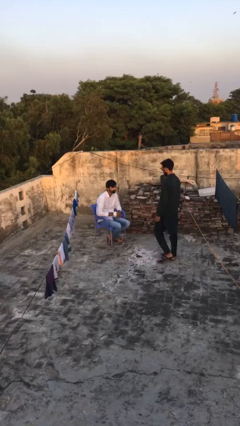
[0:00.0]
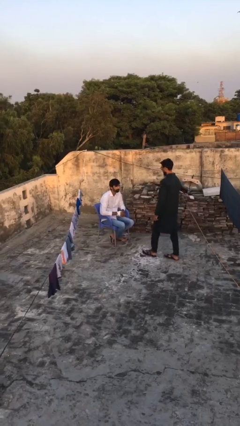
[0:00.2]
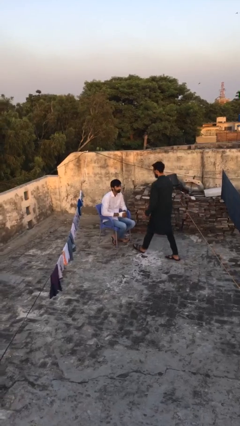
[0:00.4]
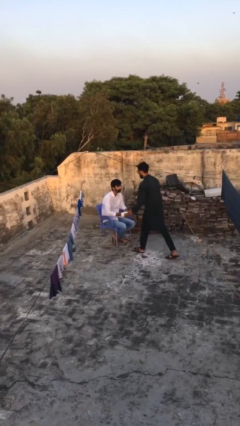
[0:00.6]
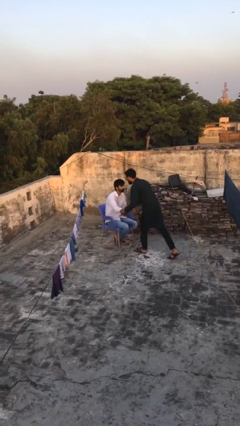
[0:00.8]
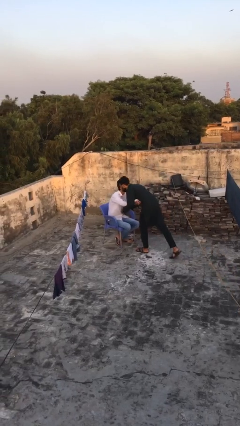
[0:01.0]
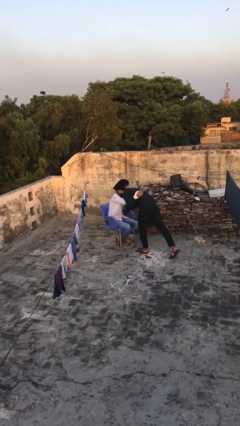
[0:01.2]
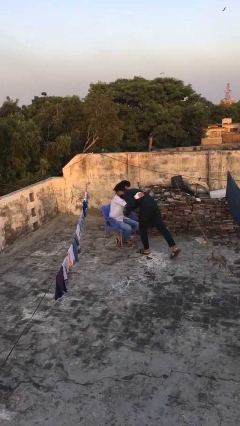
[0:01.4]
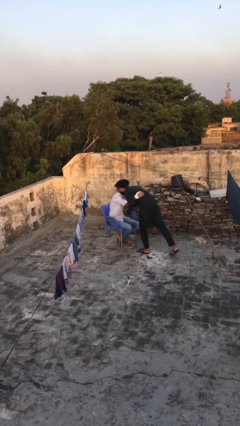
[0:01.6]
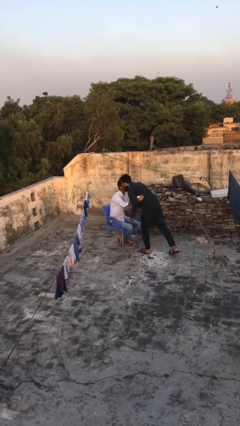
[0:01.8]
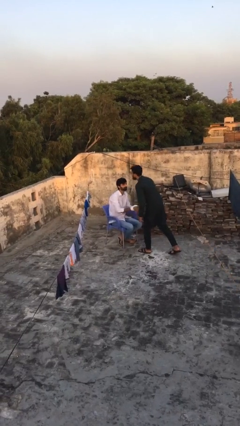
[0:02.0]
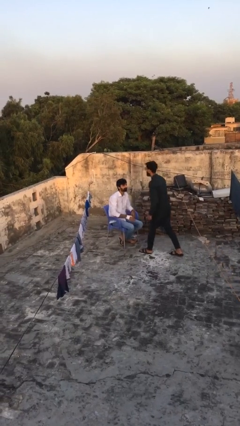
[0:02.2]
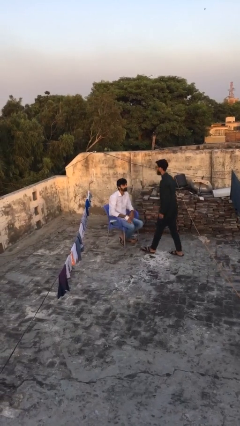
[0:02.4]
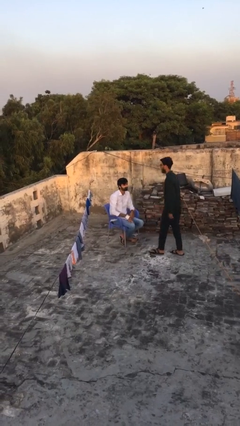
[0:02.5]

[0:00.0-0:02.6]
person embraces person

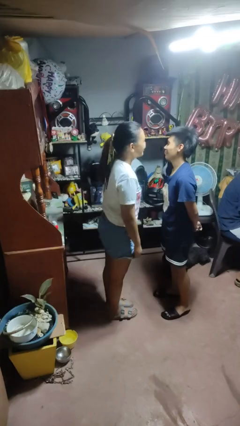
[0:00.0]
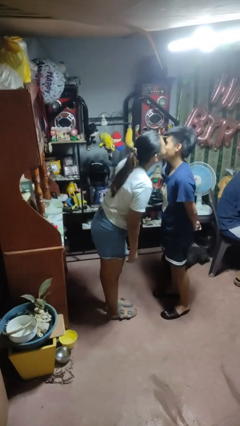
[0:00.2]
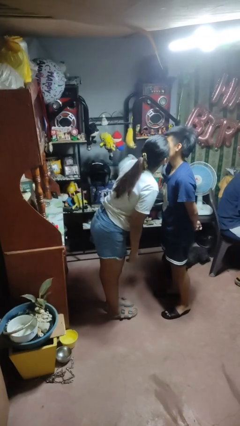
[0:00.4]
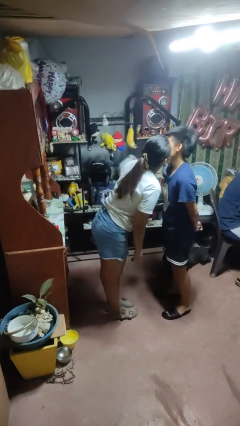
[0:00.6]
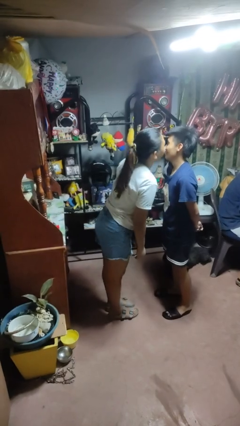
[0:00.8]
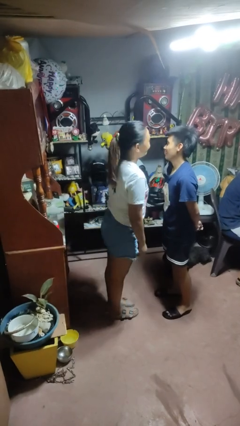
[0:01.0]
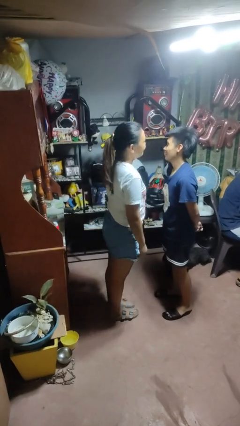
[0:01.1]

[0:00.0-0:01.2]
person kisses cheek of person

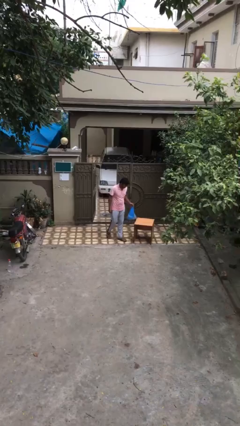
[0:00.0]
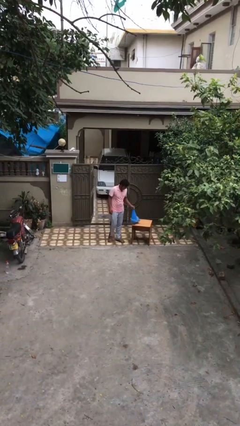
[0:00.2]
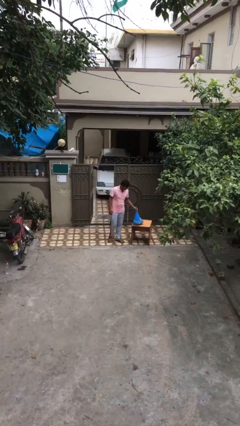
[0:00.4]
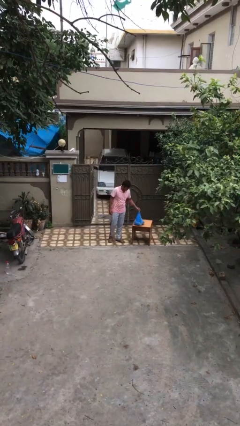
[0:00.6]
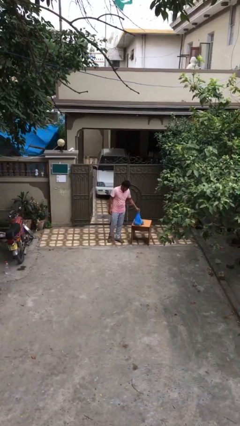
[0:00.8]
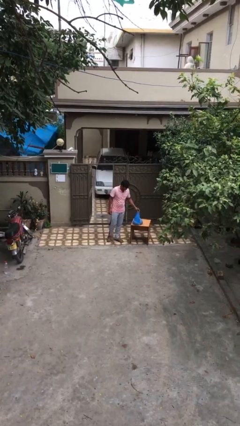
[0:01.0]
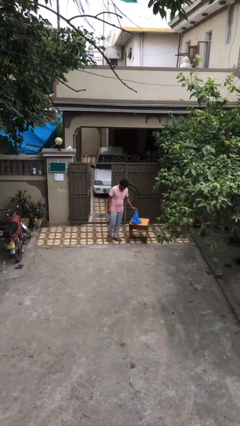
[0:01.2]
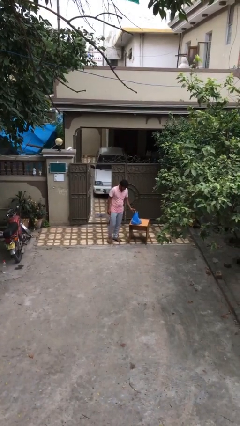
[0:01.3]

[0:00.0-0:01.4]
person puts down object on floor

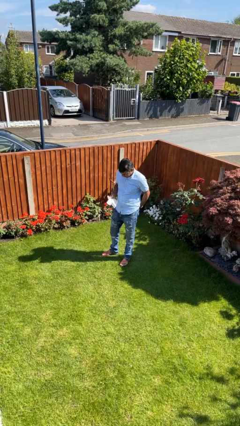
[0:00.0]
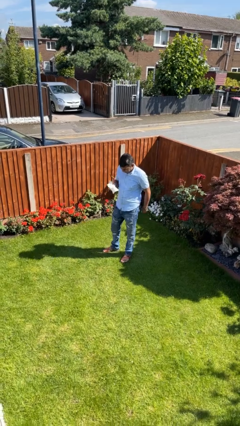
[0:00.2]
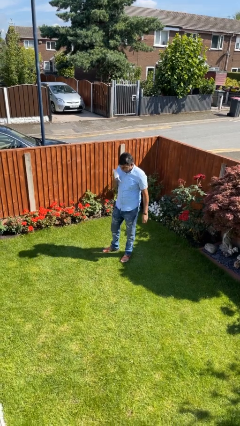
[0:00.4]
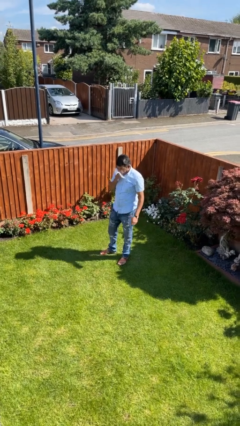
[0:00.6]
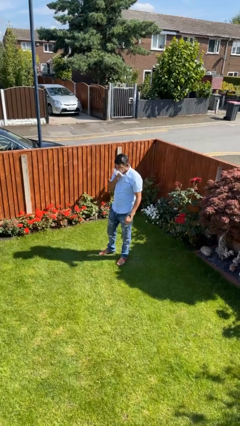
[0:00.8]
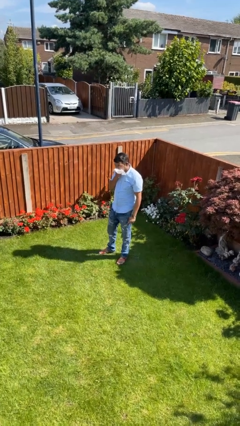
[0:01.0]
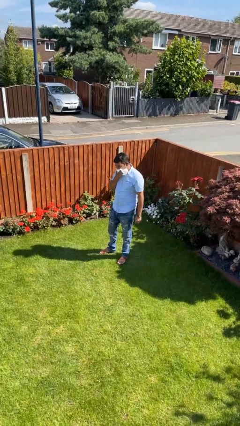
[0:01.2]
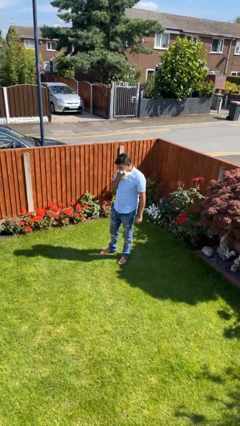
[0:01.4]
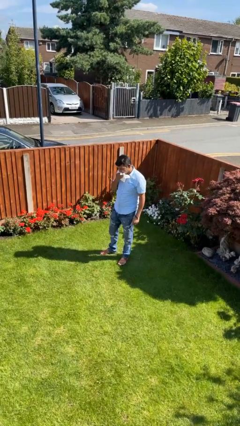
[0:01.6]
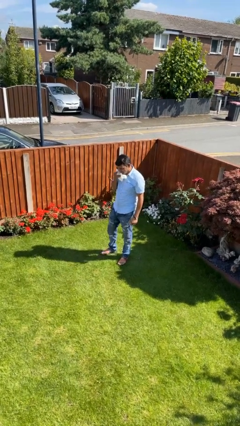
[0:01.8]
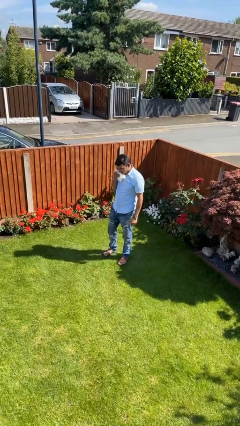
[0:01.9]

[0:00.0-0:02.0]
person wipes mouth with napkin

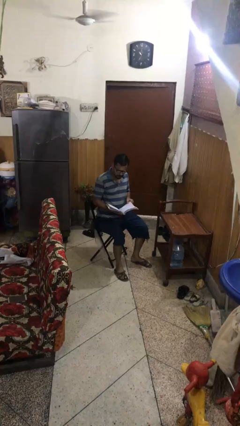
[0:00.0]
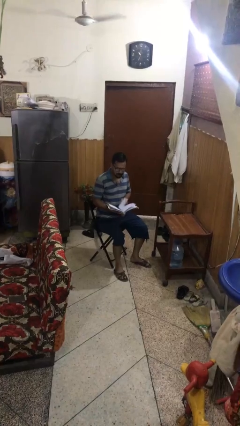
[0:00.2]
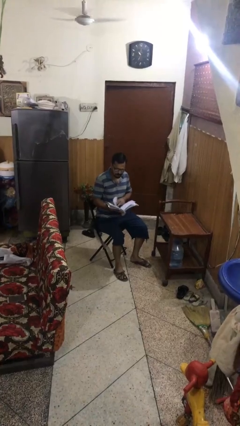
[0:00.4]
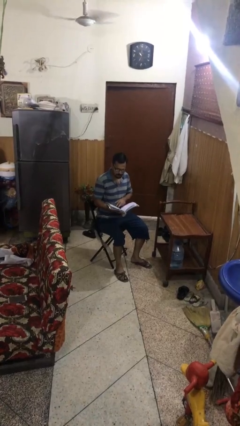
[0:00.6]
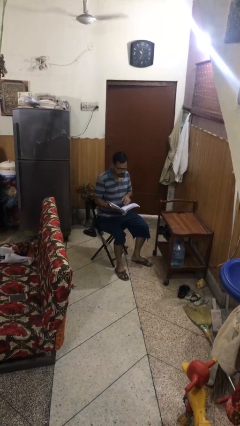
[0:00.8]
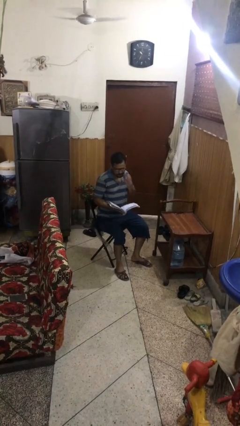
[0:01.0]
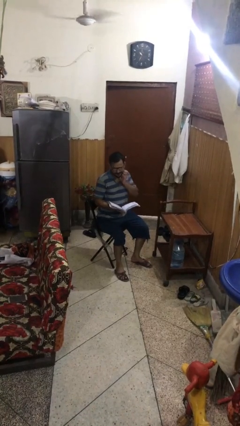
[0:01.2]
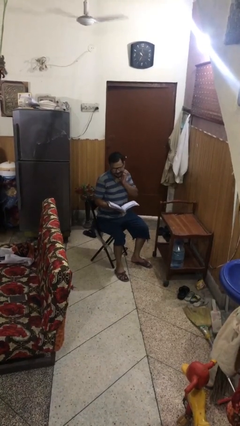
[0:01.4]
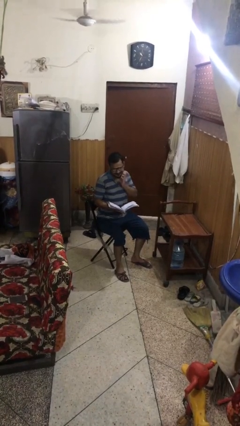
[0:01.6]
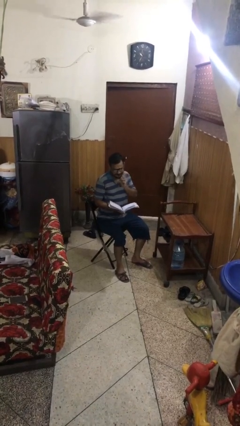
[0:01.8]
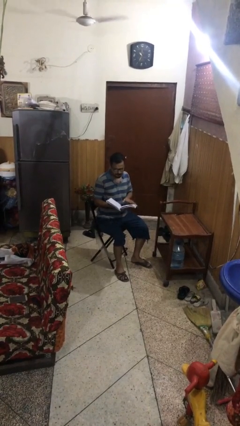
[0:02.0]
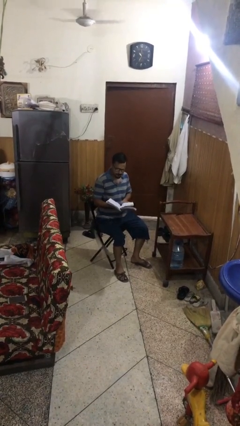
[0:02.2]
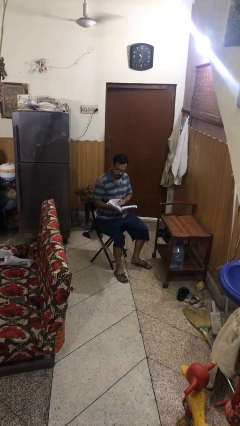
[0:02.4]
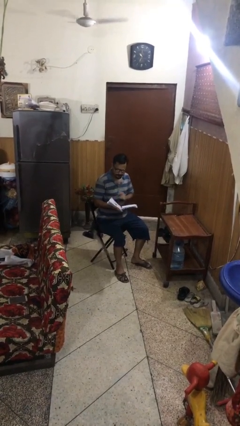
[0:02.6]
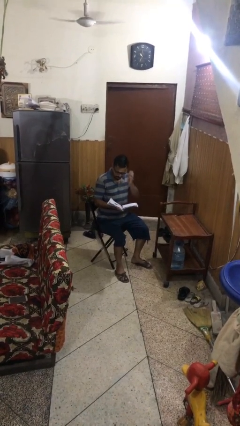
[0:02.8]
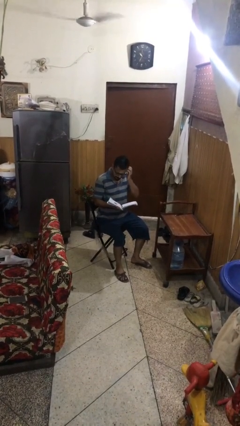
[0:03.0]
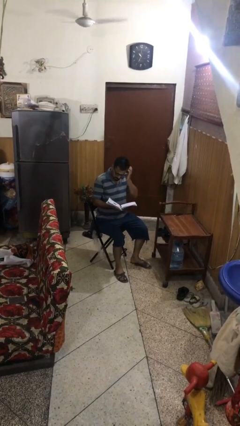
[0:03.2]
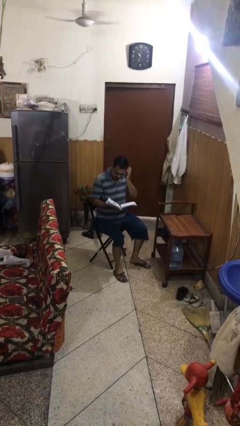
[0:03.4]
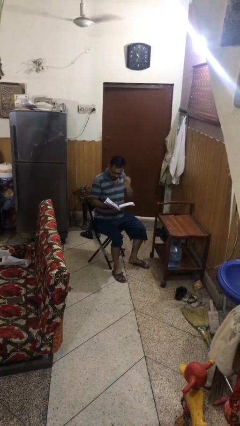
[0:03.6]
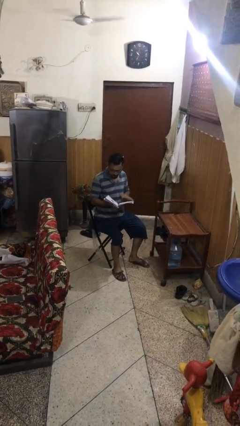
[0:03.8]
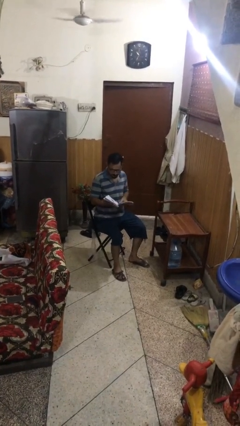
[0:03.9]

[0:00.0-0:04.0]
person reads document

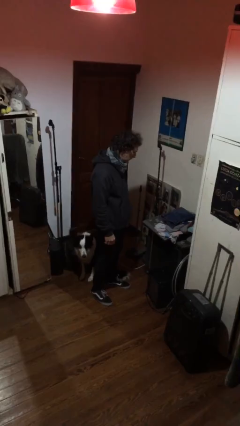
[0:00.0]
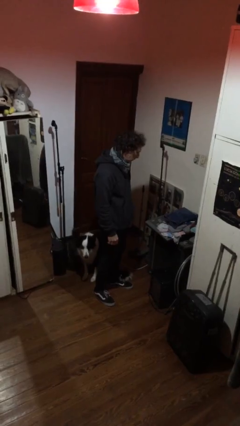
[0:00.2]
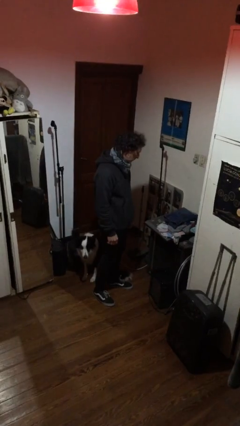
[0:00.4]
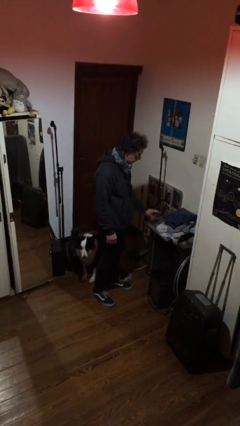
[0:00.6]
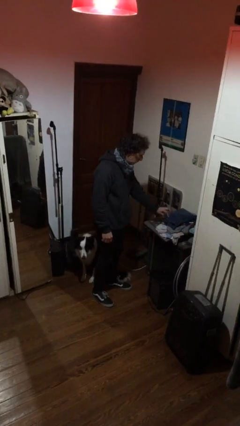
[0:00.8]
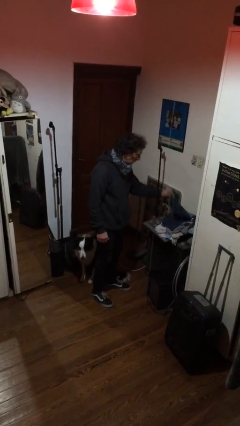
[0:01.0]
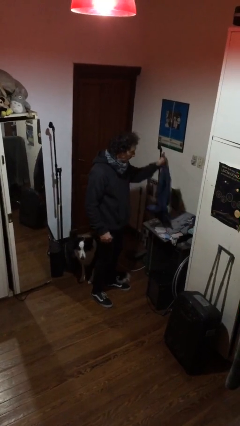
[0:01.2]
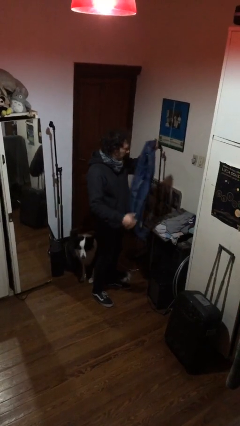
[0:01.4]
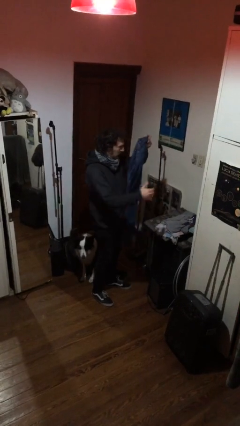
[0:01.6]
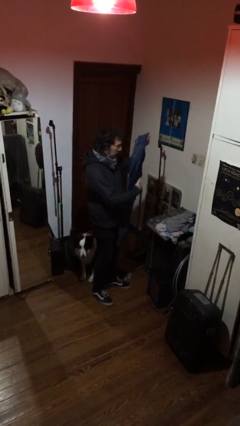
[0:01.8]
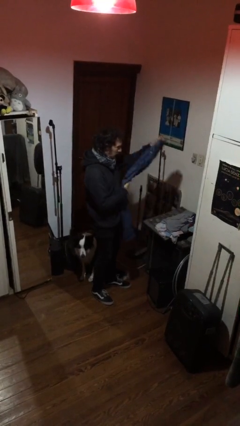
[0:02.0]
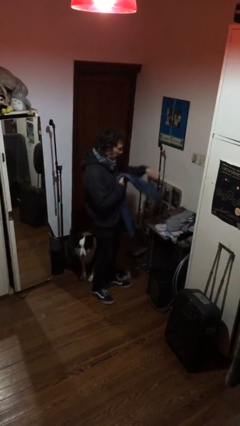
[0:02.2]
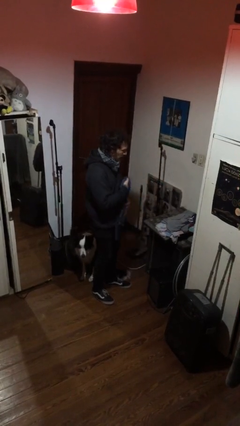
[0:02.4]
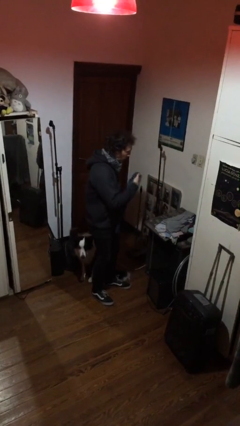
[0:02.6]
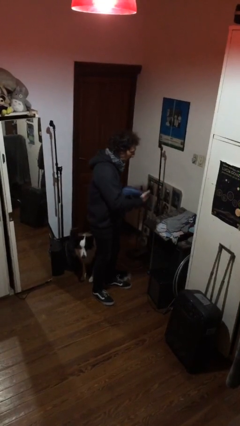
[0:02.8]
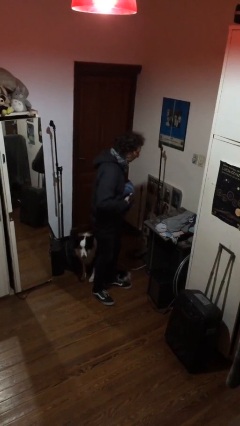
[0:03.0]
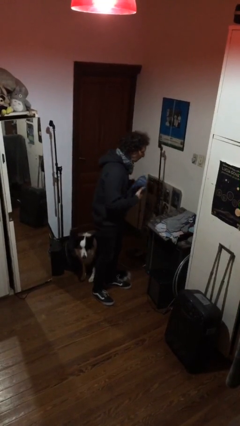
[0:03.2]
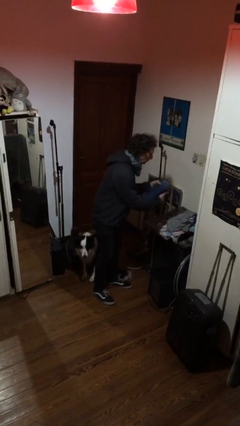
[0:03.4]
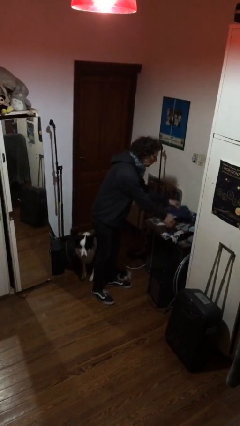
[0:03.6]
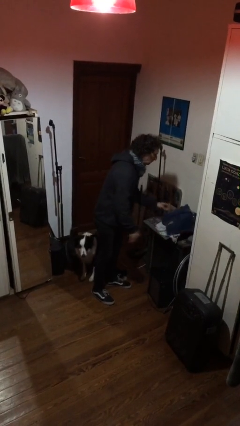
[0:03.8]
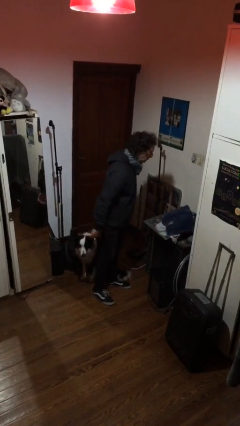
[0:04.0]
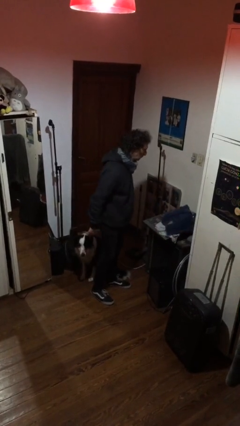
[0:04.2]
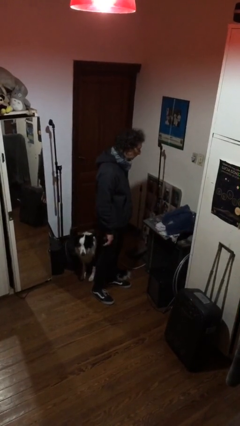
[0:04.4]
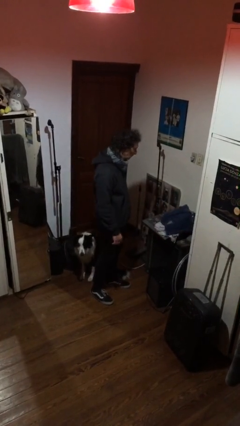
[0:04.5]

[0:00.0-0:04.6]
person folds pants

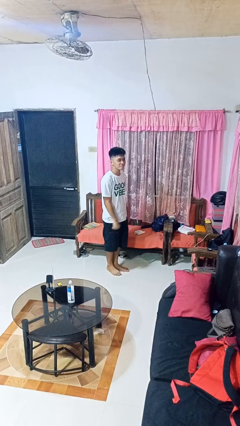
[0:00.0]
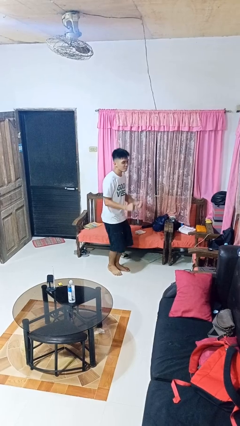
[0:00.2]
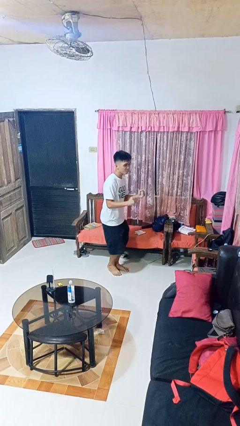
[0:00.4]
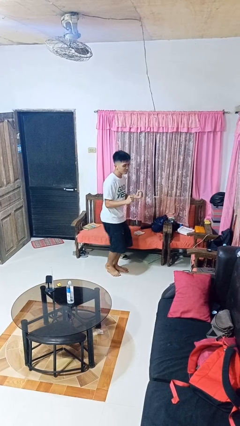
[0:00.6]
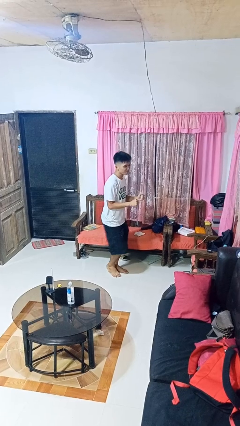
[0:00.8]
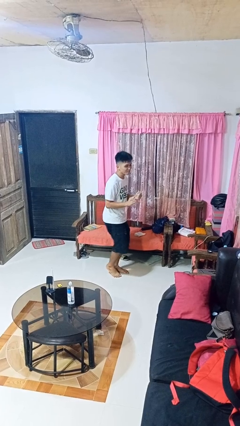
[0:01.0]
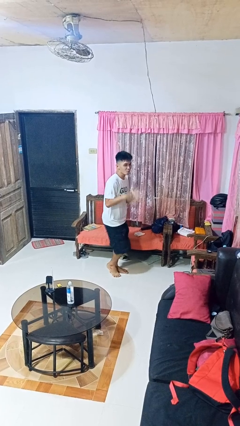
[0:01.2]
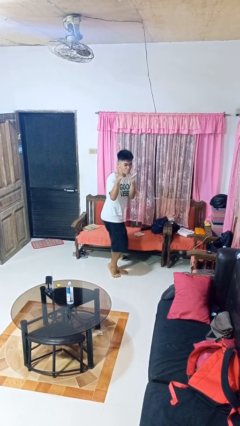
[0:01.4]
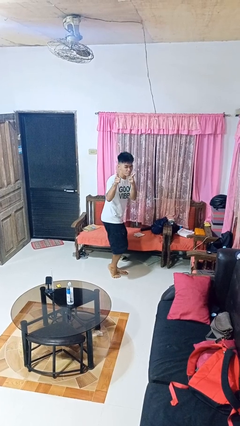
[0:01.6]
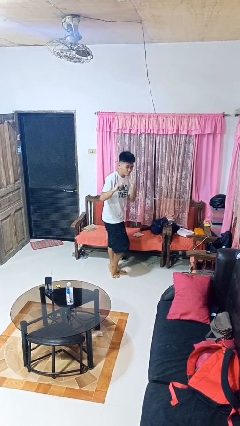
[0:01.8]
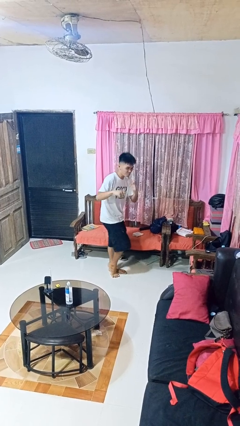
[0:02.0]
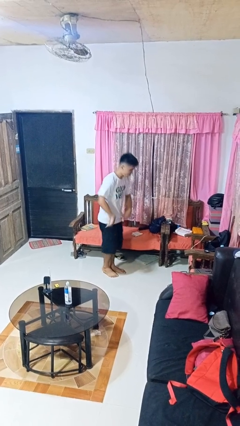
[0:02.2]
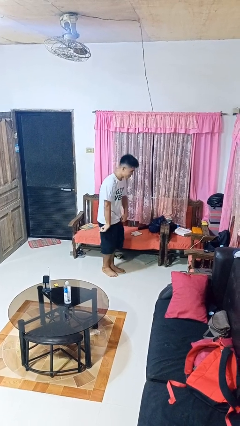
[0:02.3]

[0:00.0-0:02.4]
person dances in place
